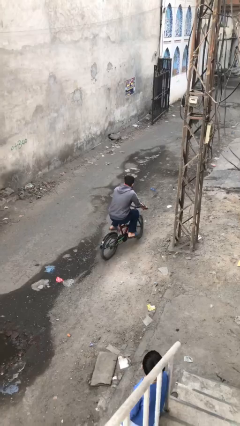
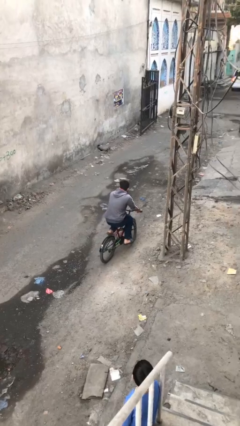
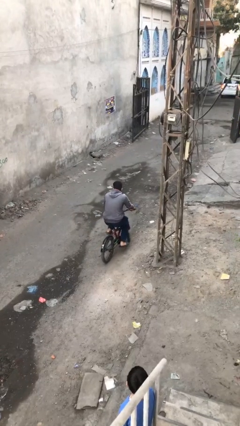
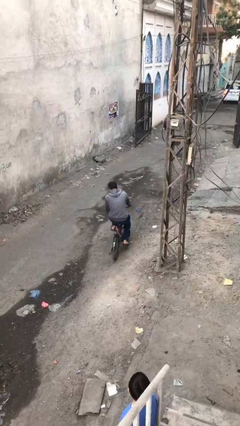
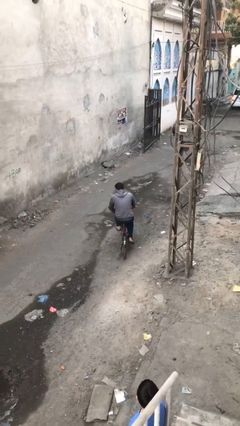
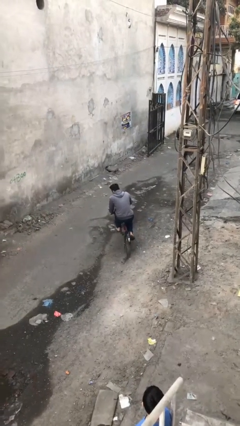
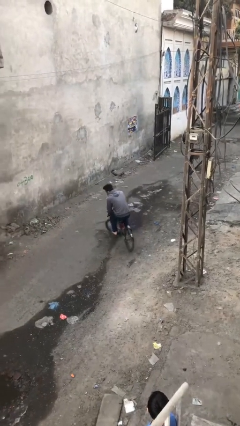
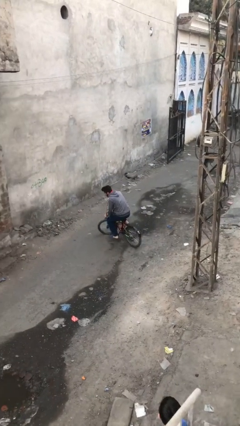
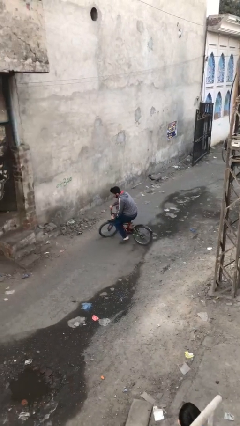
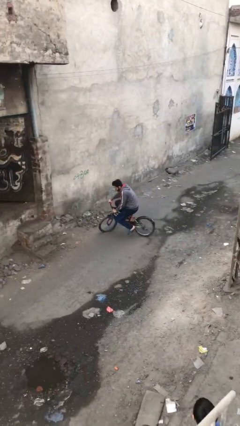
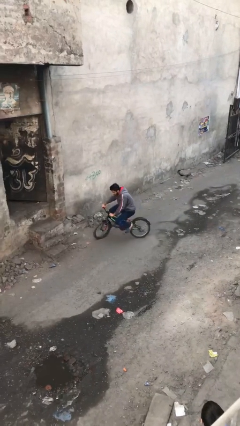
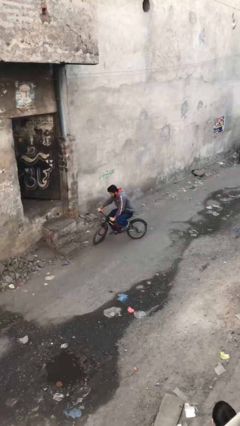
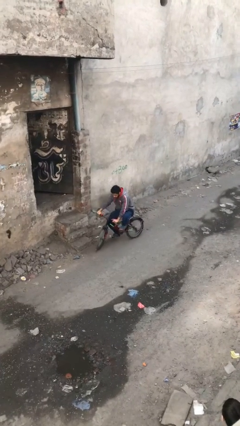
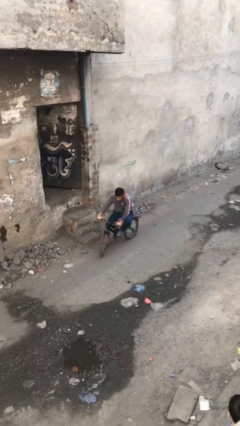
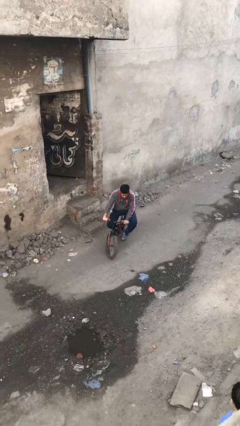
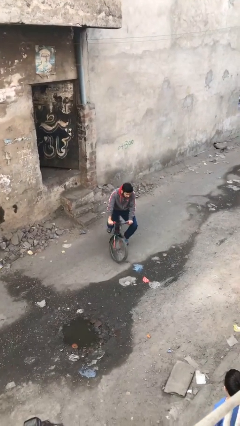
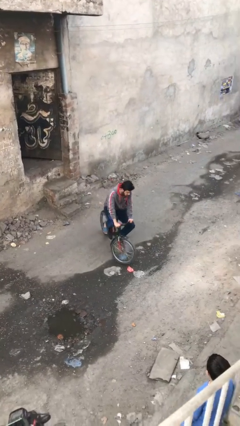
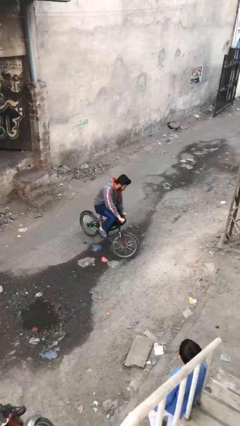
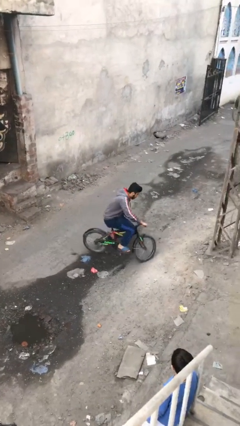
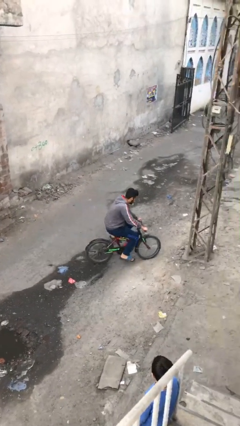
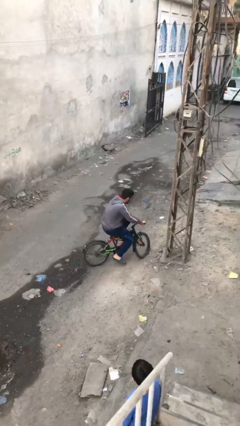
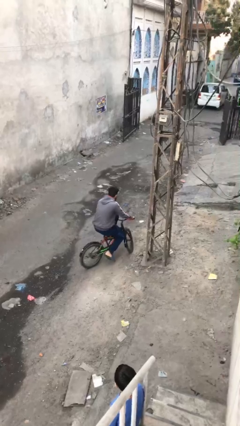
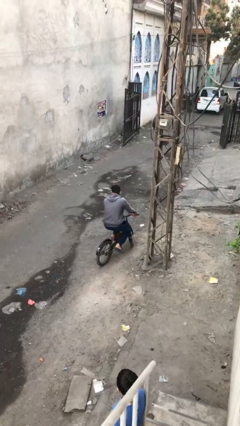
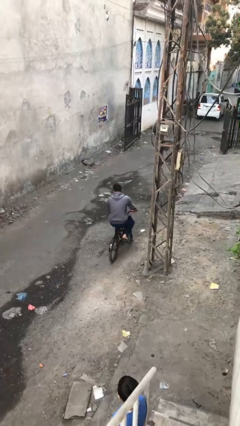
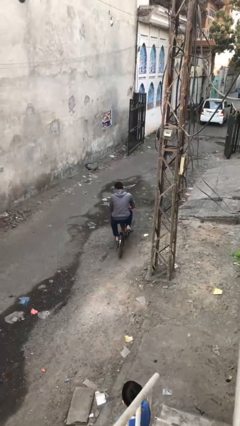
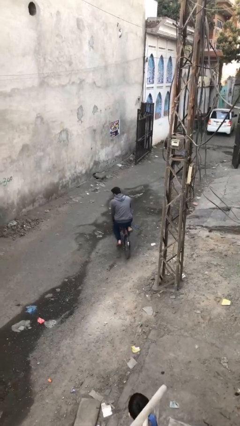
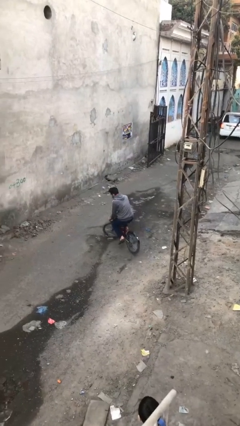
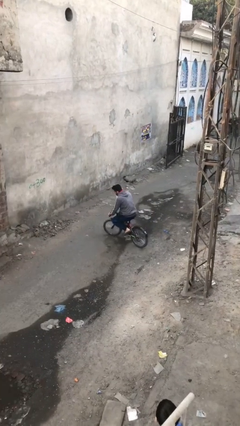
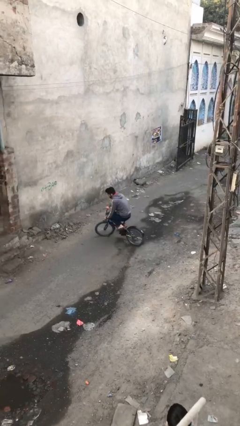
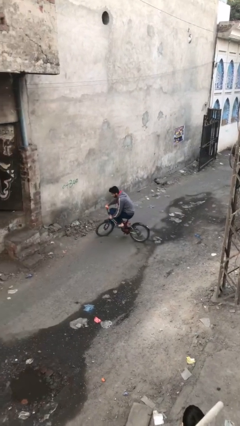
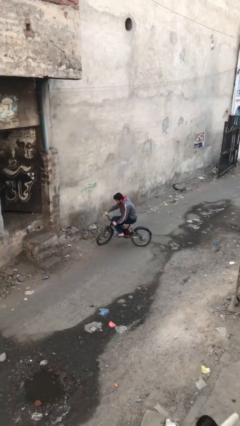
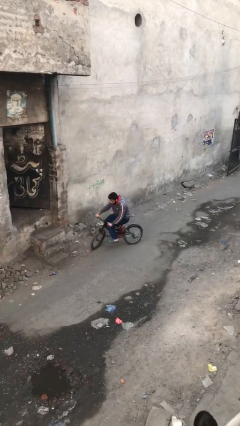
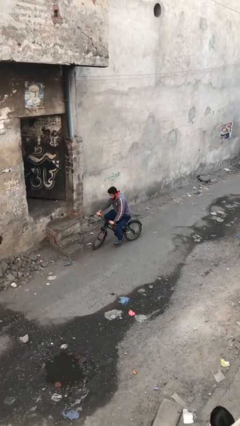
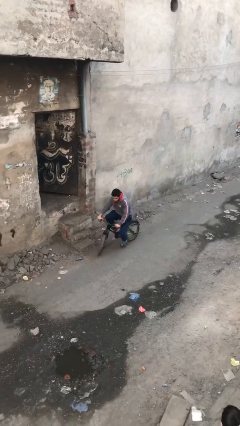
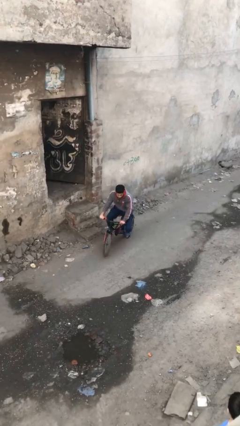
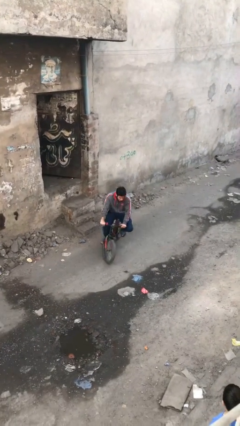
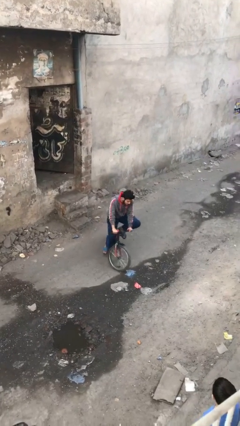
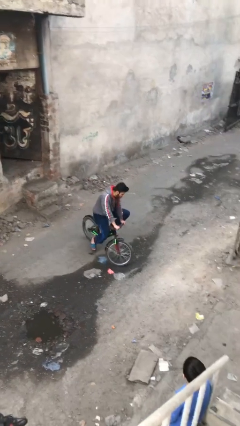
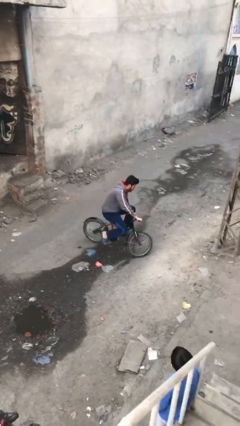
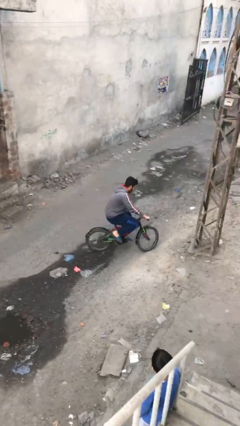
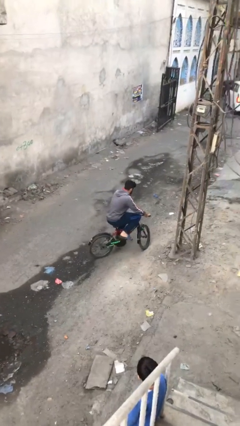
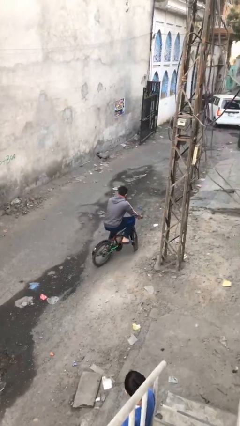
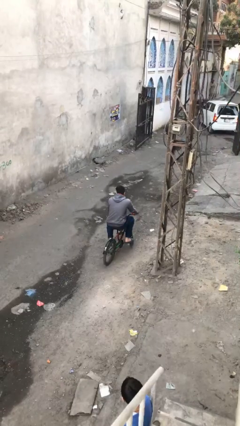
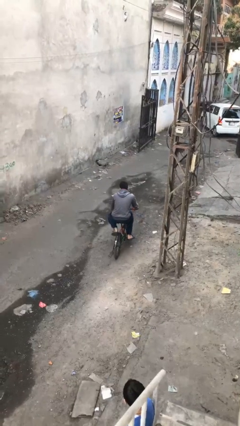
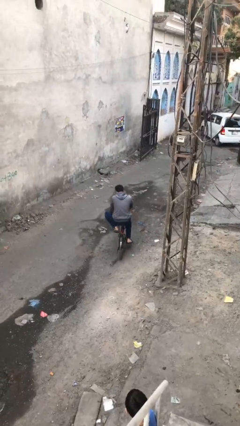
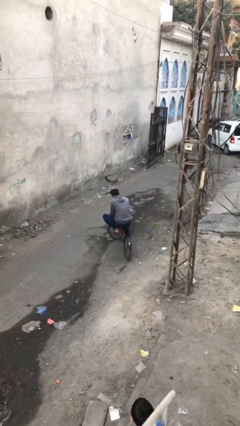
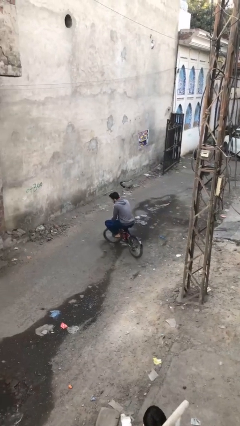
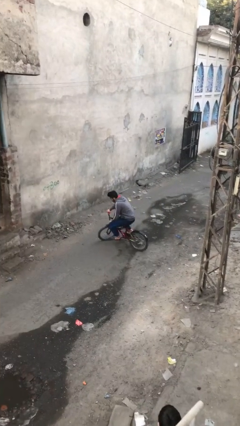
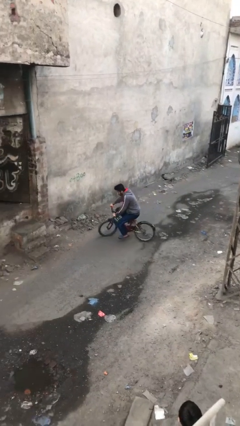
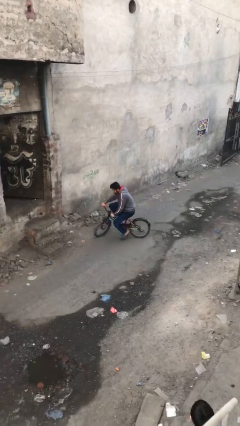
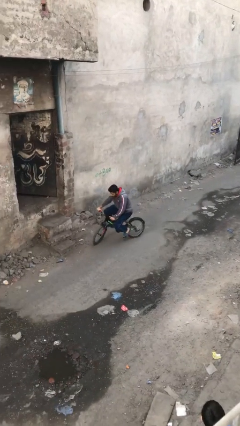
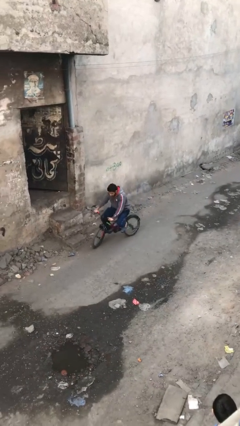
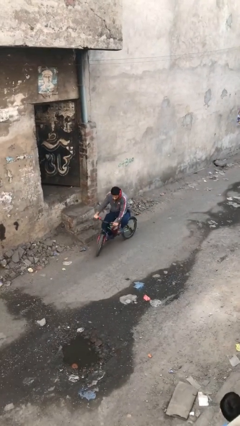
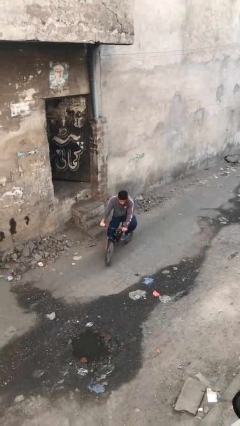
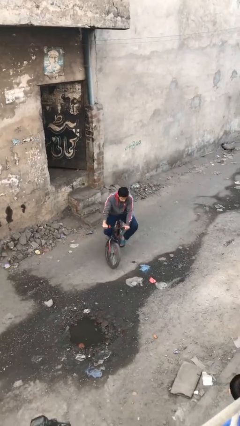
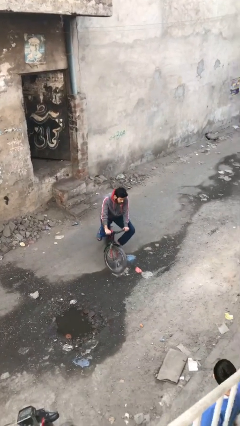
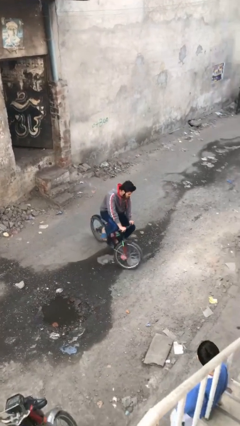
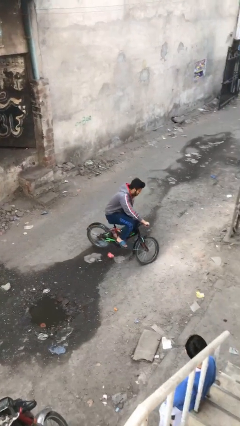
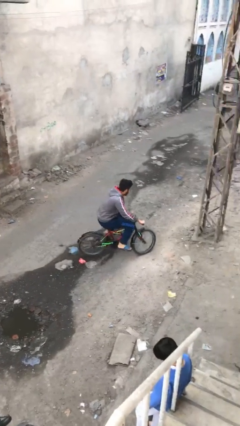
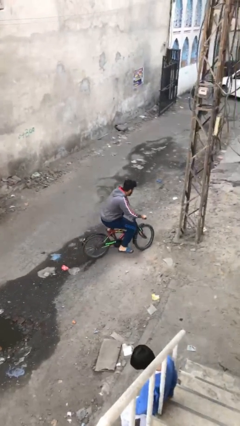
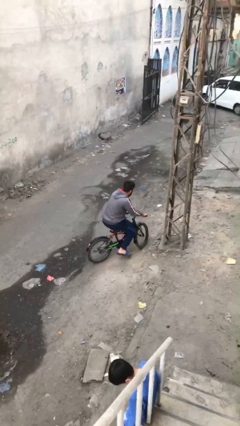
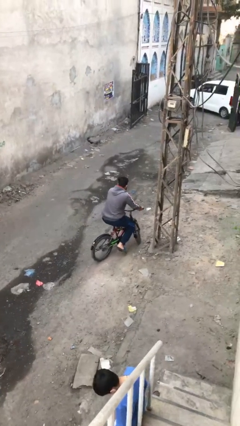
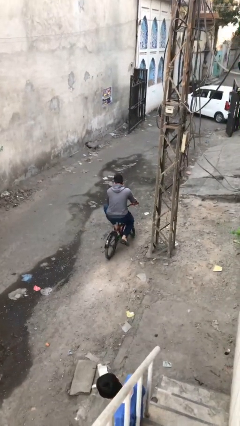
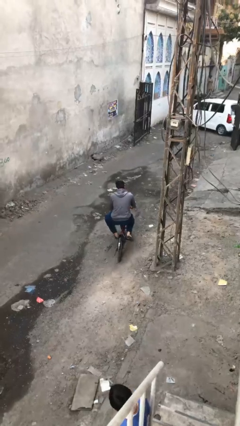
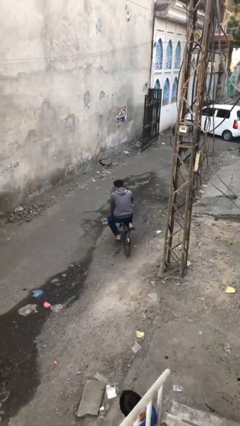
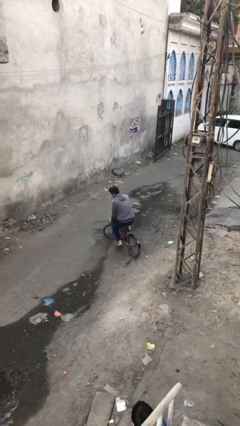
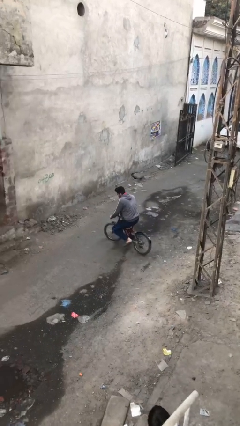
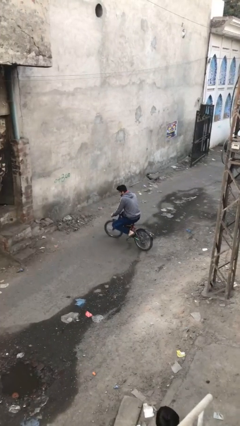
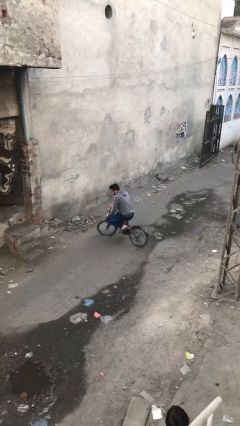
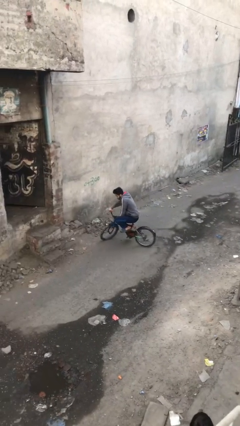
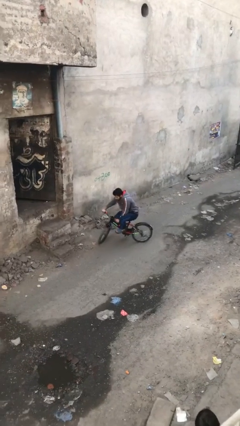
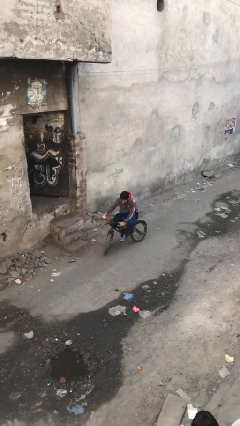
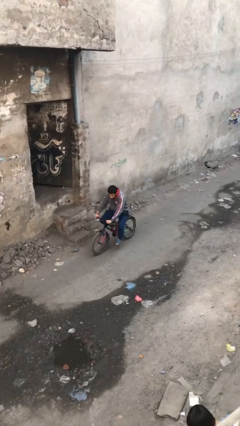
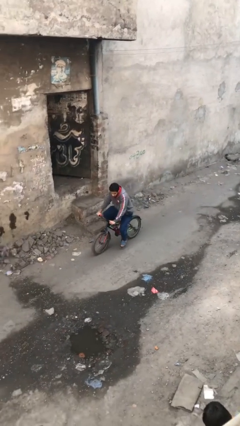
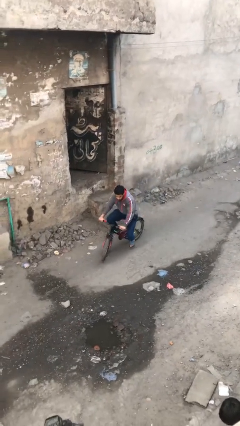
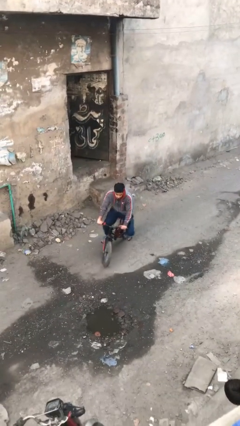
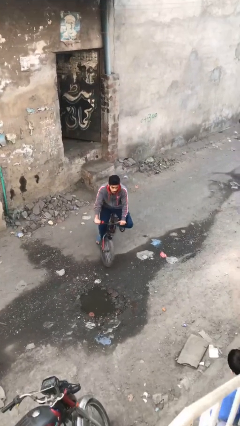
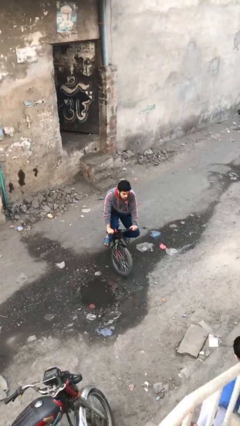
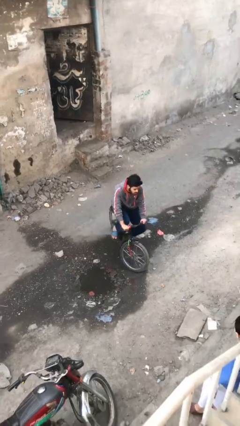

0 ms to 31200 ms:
person rides bicycle

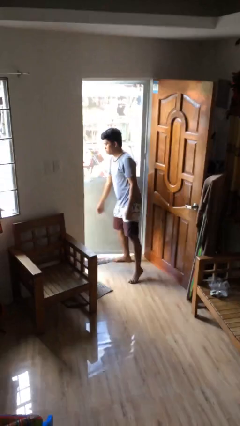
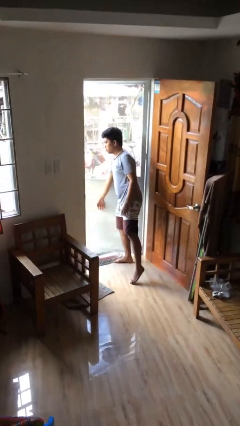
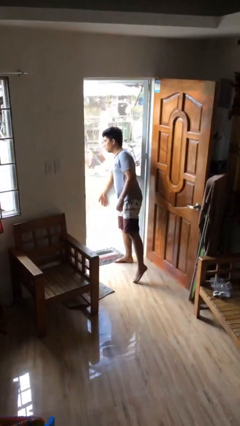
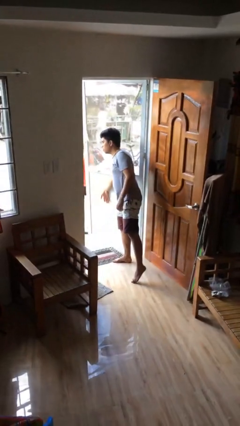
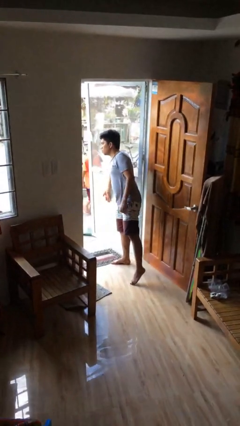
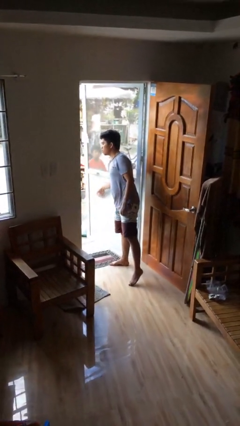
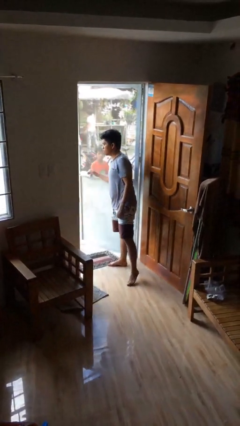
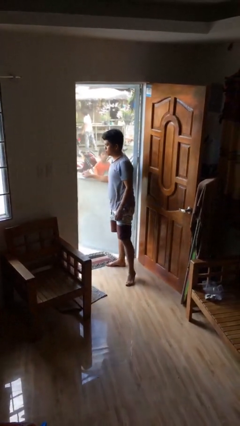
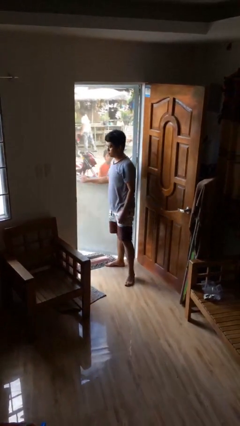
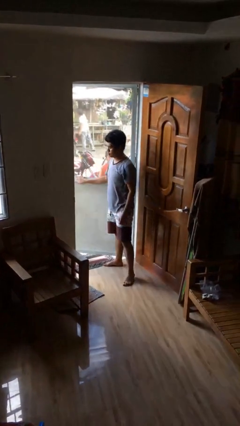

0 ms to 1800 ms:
person opens facility door

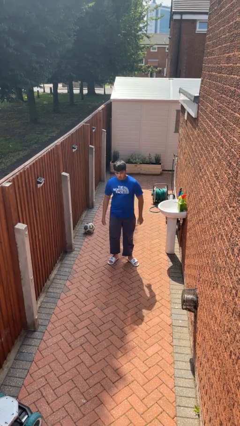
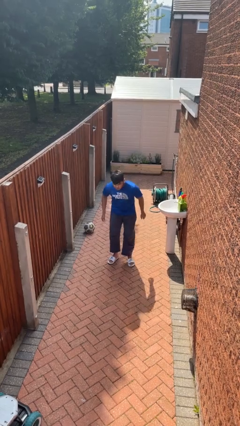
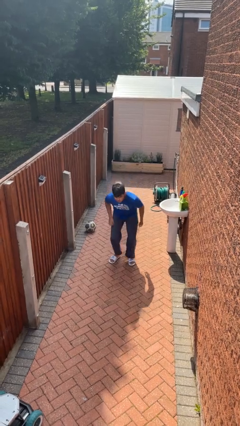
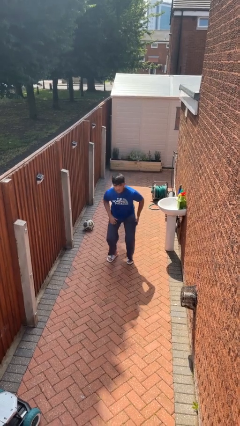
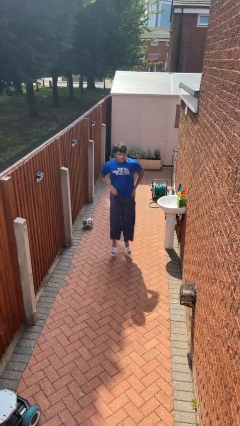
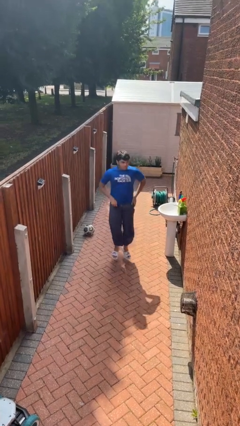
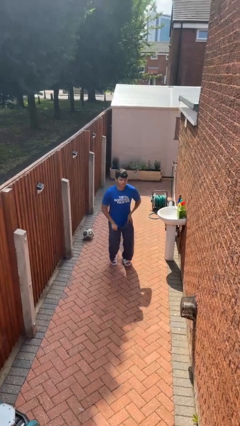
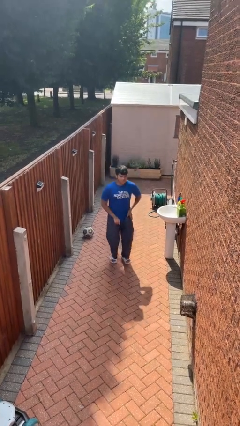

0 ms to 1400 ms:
person jumps
